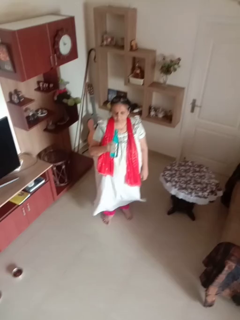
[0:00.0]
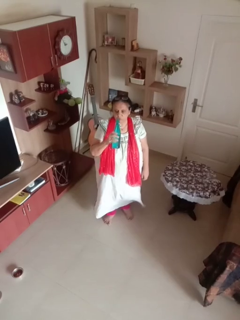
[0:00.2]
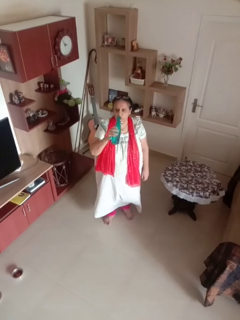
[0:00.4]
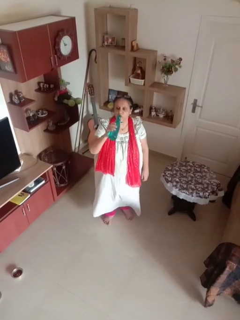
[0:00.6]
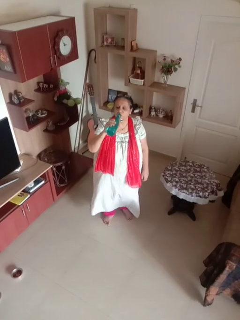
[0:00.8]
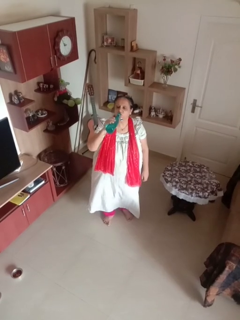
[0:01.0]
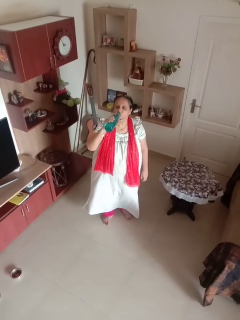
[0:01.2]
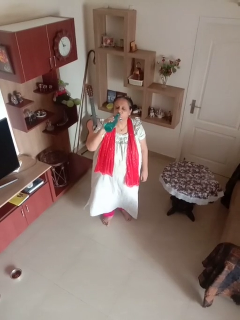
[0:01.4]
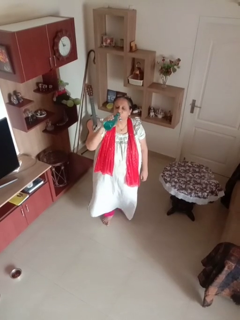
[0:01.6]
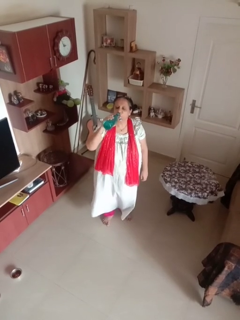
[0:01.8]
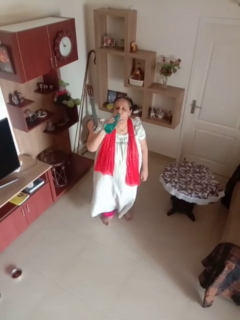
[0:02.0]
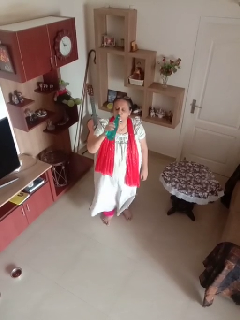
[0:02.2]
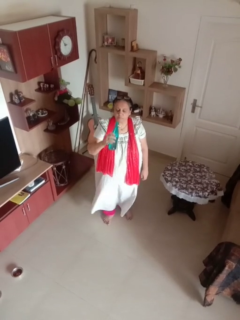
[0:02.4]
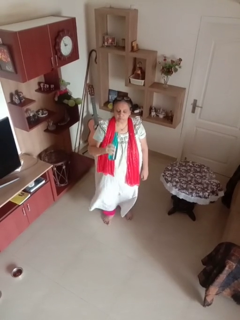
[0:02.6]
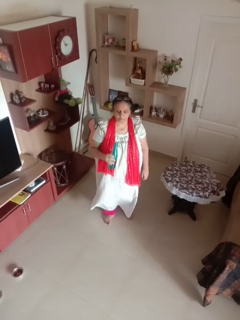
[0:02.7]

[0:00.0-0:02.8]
person drinks from bottle

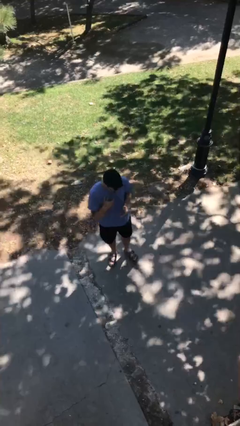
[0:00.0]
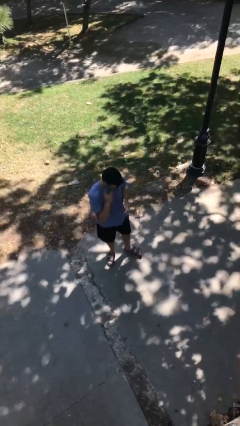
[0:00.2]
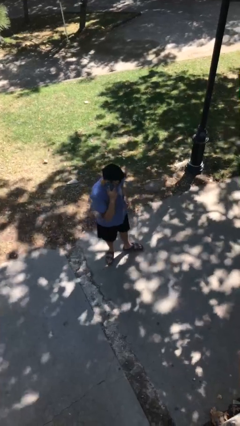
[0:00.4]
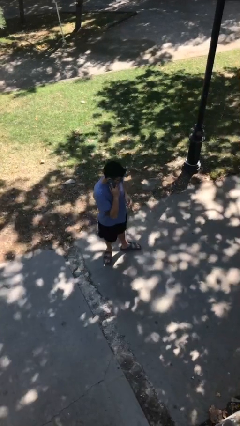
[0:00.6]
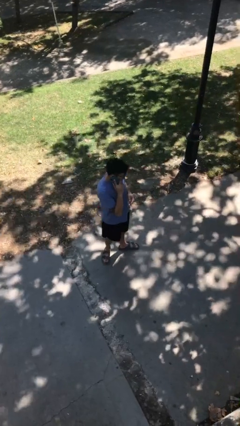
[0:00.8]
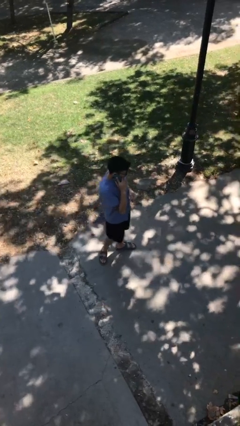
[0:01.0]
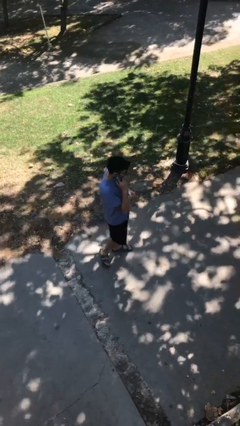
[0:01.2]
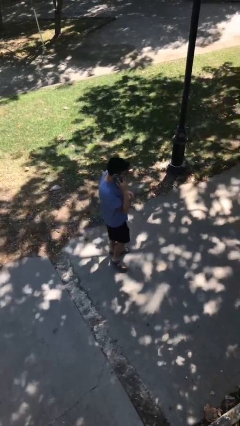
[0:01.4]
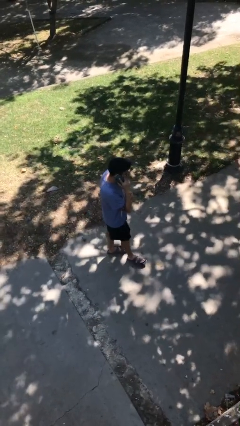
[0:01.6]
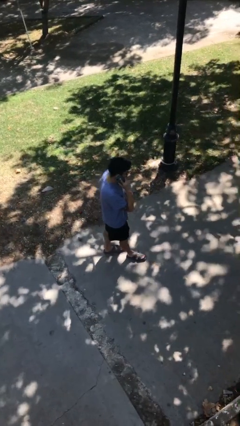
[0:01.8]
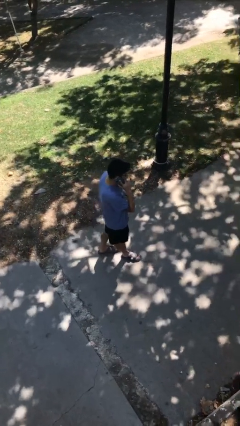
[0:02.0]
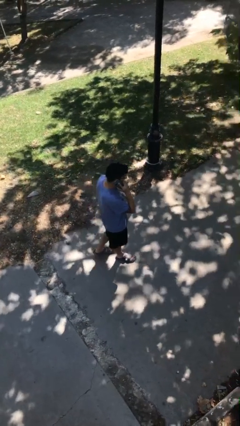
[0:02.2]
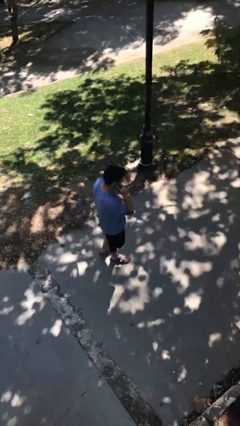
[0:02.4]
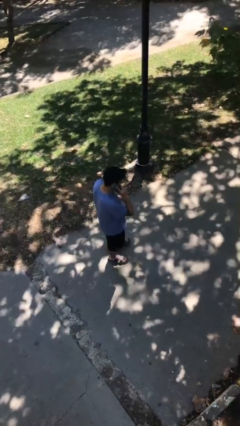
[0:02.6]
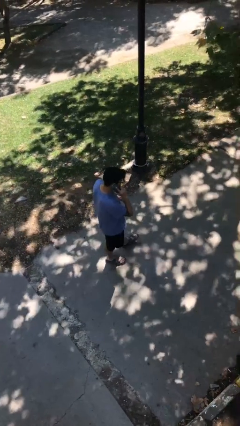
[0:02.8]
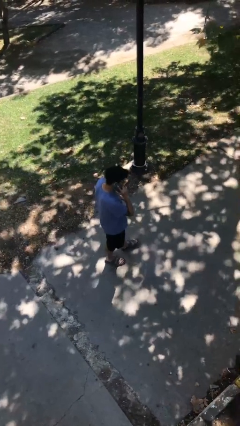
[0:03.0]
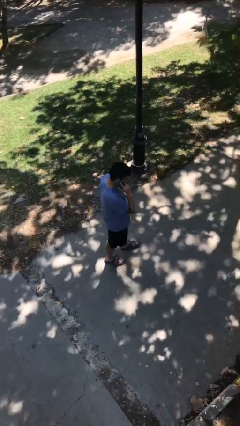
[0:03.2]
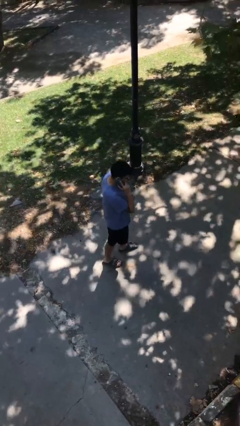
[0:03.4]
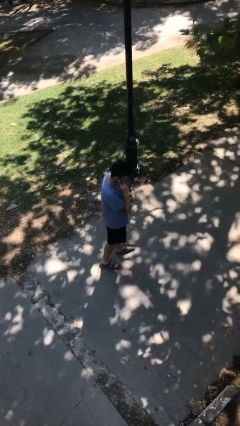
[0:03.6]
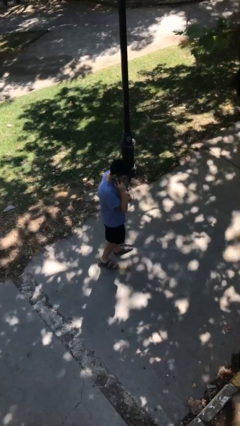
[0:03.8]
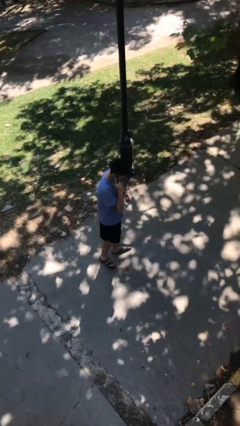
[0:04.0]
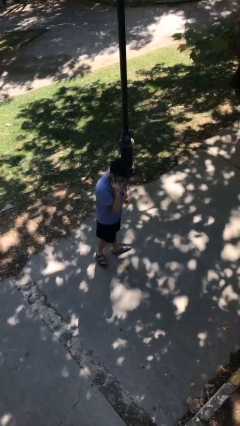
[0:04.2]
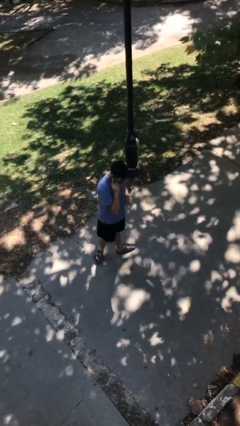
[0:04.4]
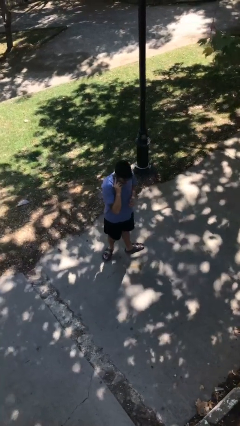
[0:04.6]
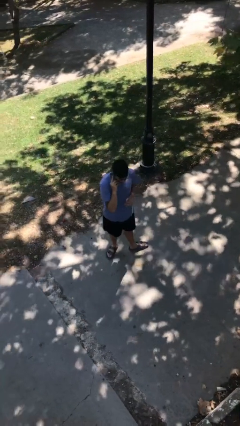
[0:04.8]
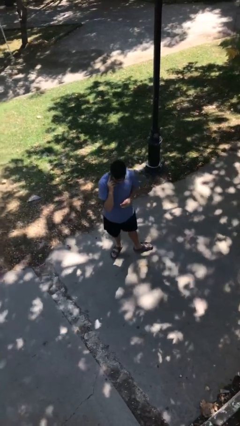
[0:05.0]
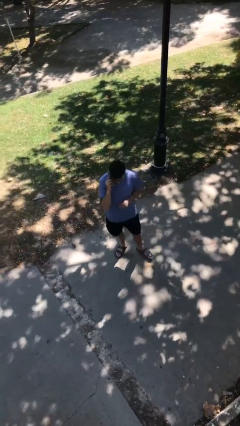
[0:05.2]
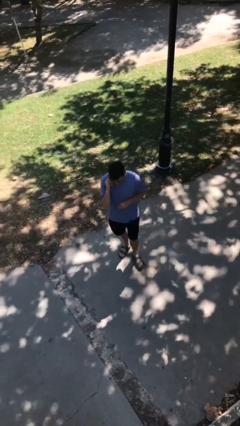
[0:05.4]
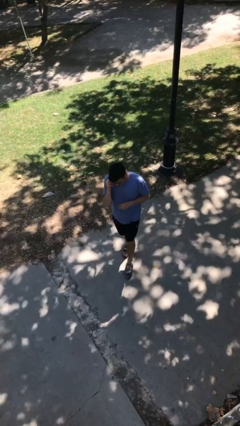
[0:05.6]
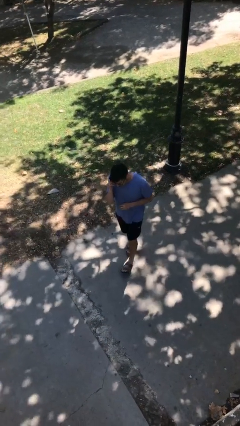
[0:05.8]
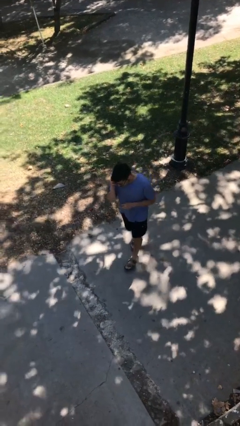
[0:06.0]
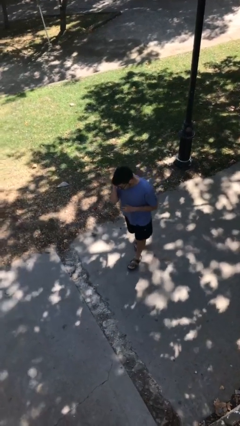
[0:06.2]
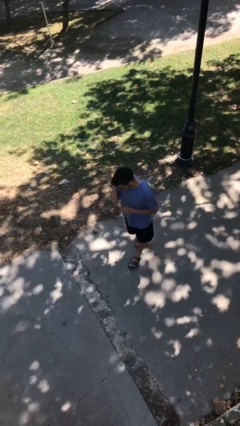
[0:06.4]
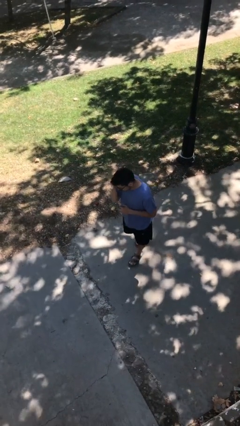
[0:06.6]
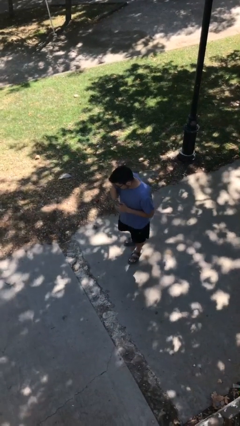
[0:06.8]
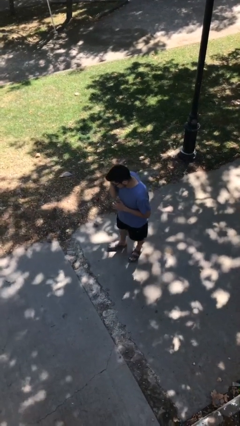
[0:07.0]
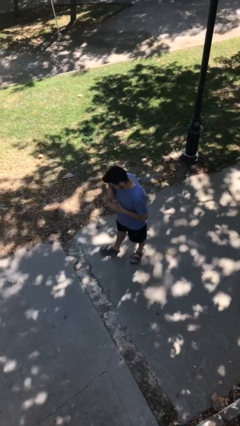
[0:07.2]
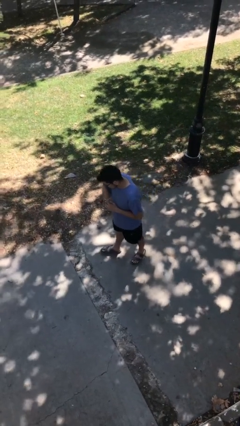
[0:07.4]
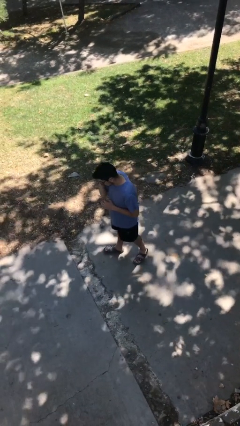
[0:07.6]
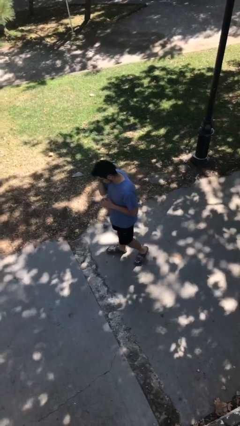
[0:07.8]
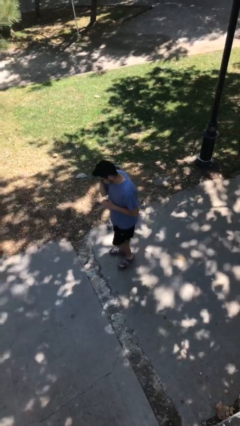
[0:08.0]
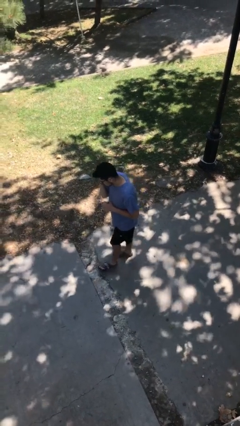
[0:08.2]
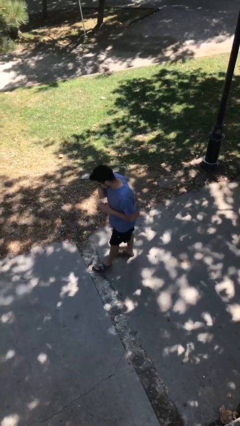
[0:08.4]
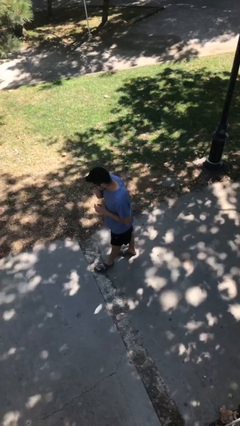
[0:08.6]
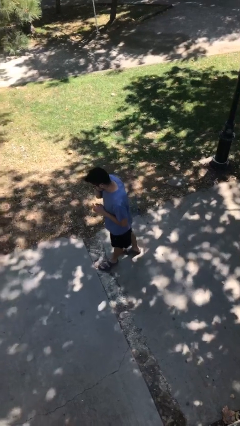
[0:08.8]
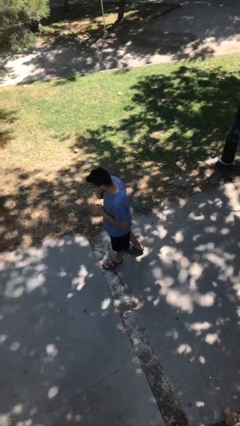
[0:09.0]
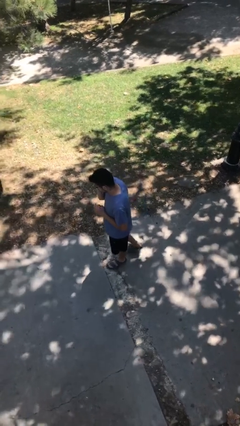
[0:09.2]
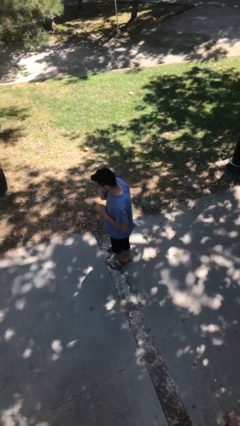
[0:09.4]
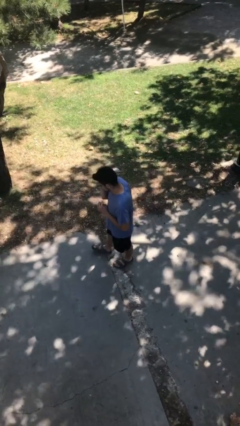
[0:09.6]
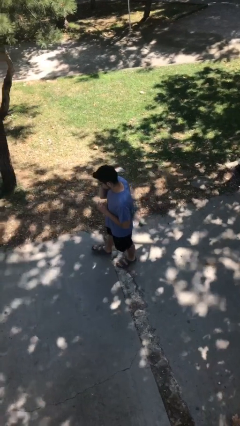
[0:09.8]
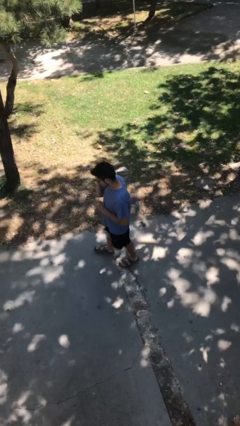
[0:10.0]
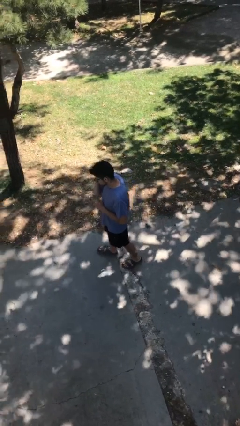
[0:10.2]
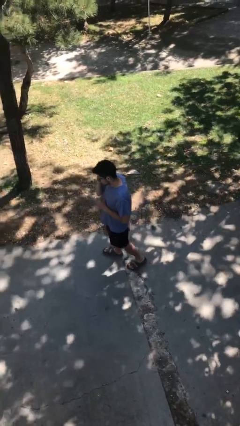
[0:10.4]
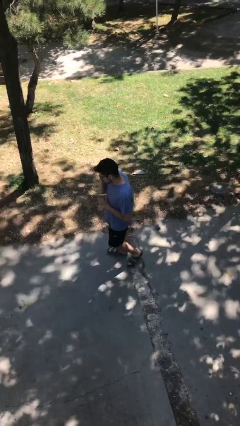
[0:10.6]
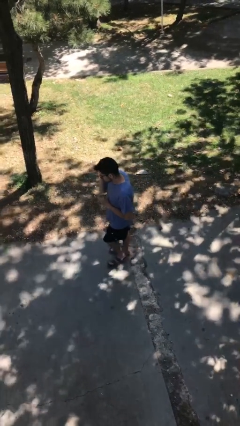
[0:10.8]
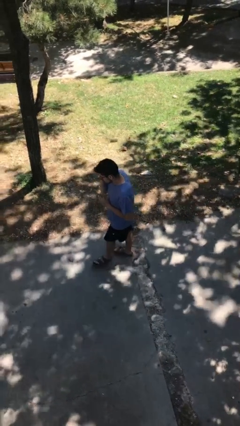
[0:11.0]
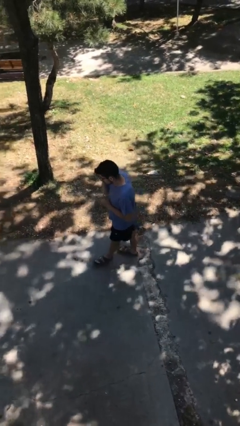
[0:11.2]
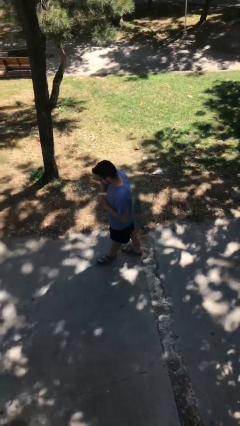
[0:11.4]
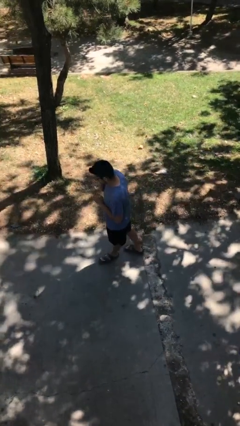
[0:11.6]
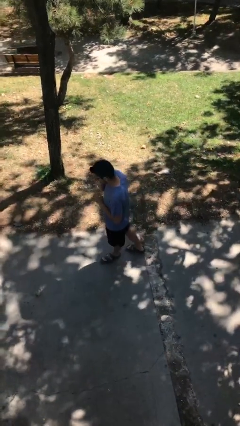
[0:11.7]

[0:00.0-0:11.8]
person talks on phone

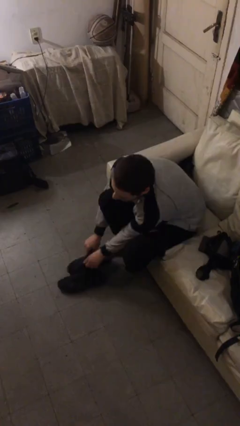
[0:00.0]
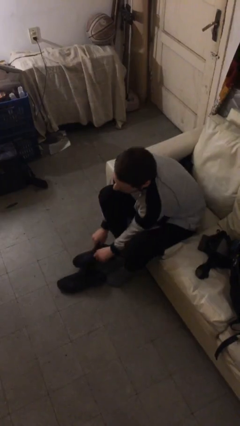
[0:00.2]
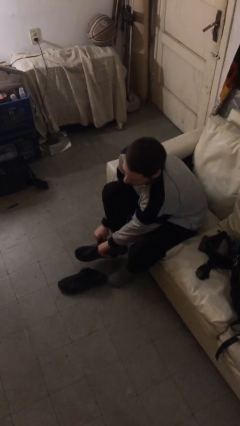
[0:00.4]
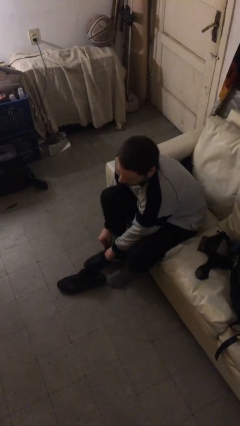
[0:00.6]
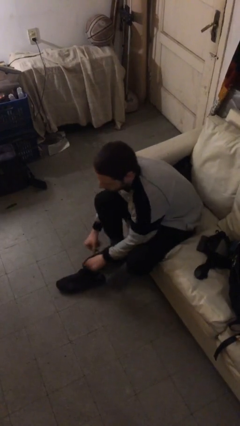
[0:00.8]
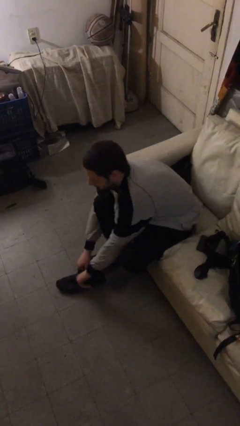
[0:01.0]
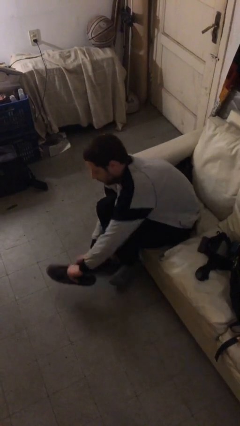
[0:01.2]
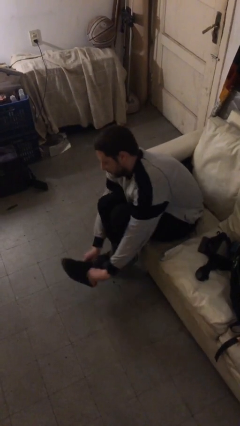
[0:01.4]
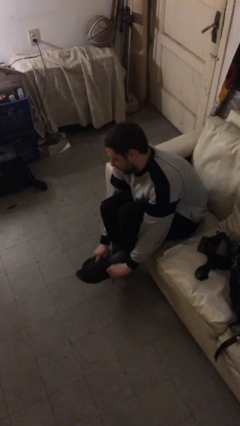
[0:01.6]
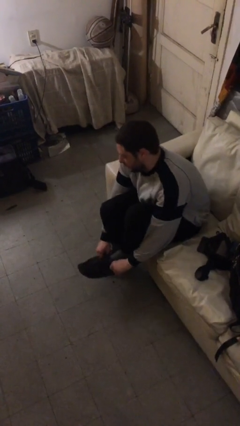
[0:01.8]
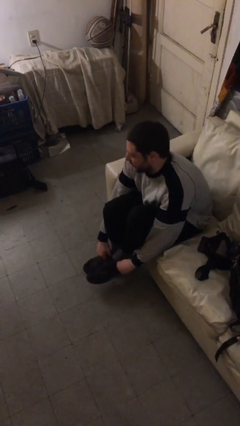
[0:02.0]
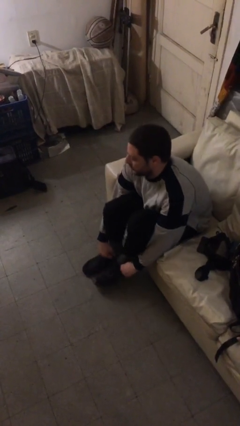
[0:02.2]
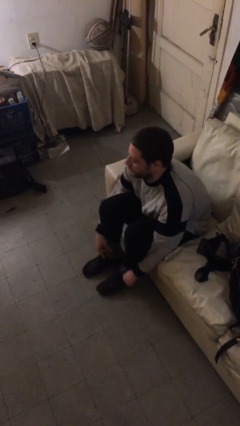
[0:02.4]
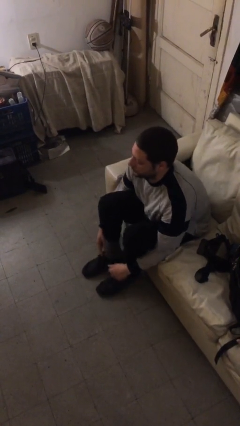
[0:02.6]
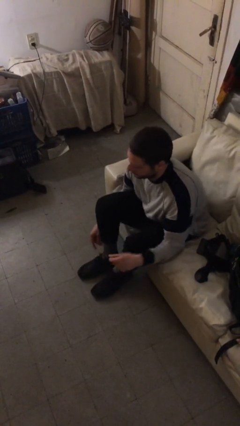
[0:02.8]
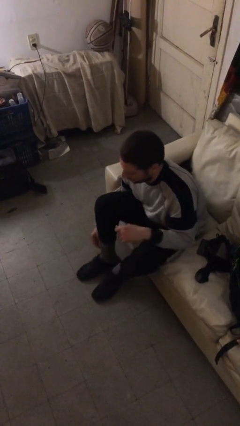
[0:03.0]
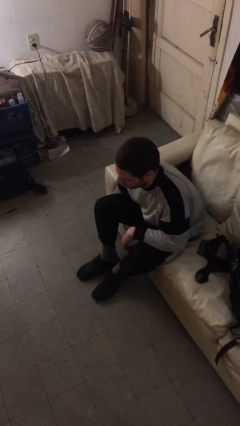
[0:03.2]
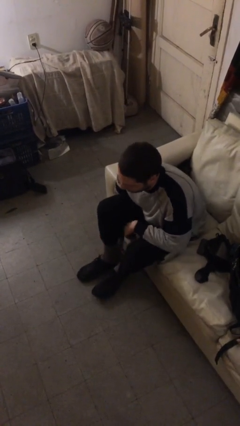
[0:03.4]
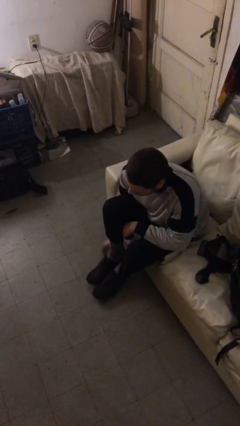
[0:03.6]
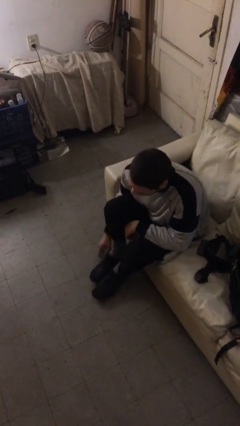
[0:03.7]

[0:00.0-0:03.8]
person puts on shoes

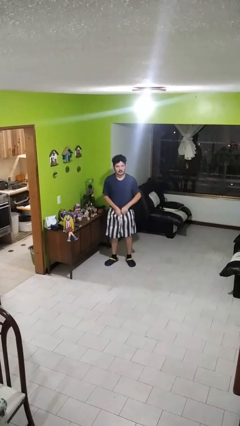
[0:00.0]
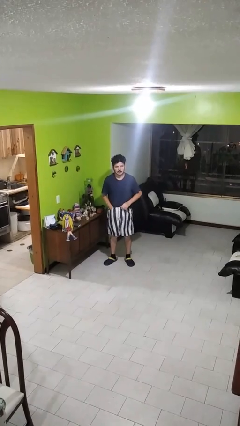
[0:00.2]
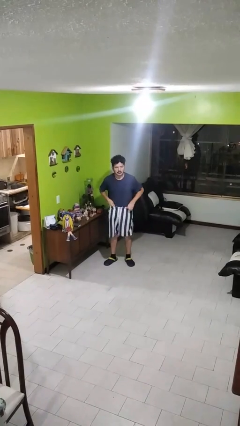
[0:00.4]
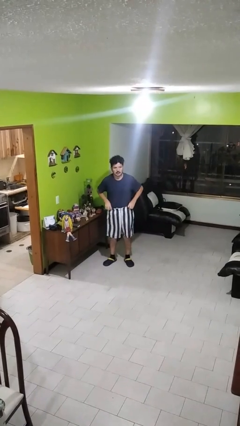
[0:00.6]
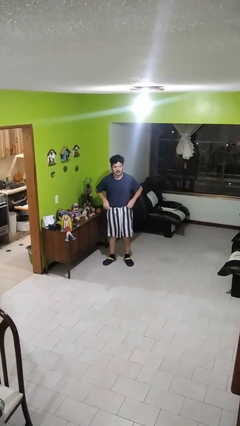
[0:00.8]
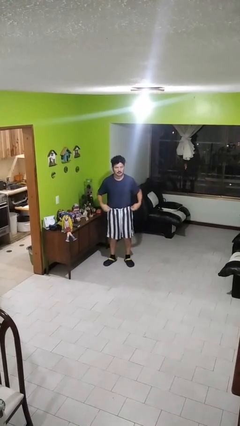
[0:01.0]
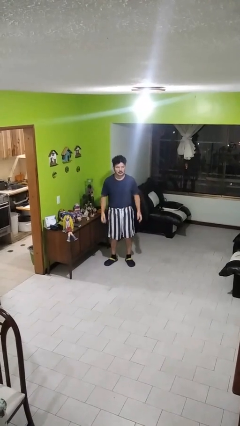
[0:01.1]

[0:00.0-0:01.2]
person tucks in shirt